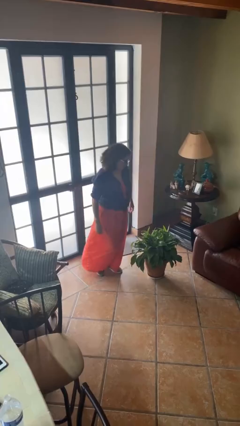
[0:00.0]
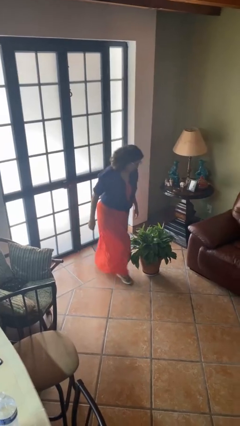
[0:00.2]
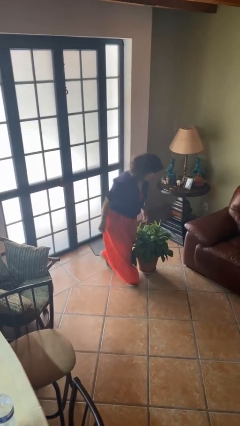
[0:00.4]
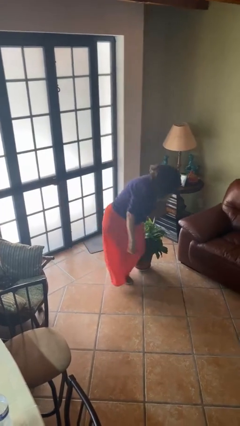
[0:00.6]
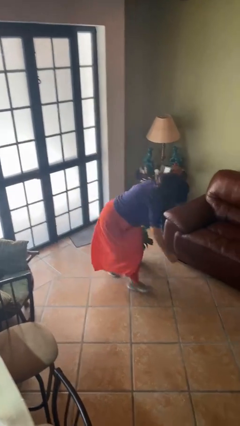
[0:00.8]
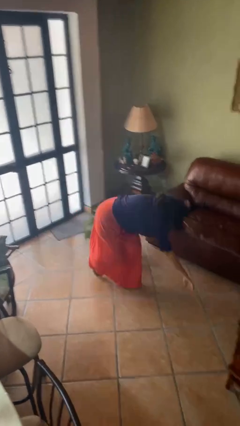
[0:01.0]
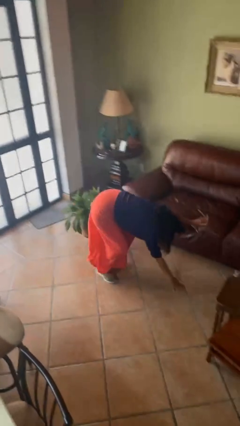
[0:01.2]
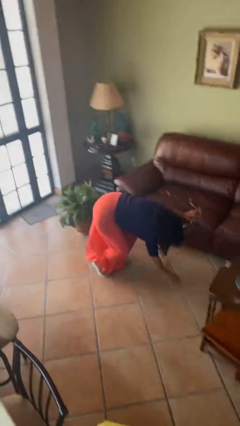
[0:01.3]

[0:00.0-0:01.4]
person trips on object on floor

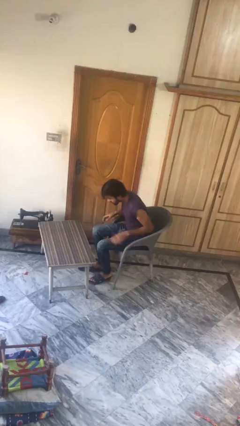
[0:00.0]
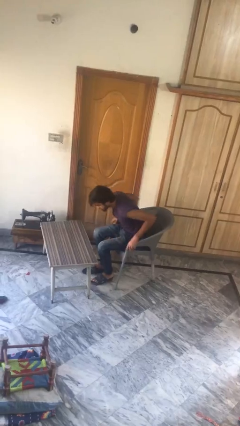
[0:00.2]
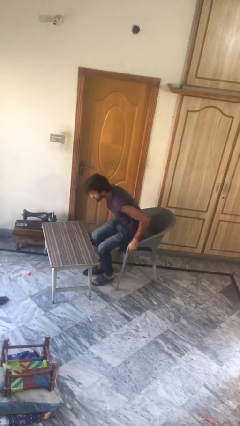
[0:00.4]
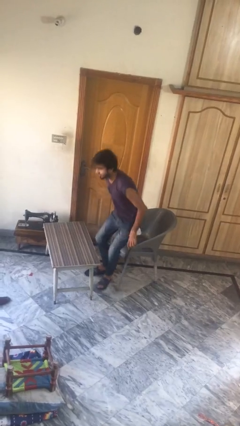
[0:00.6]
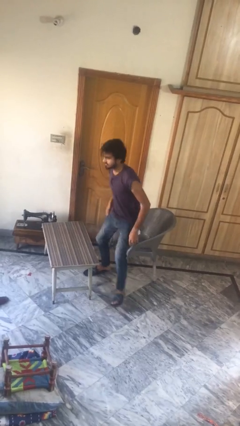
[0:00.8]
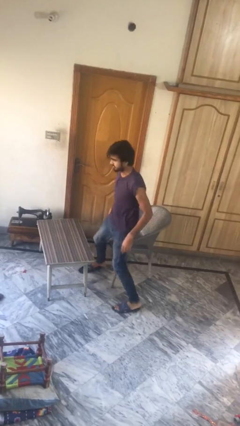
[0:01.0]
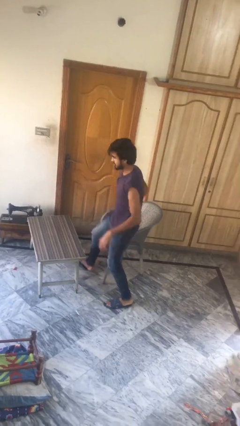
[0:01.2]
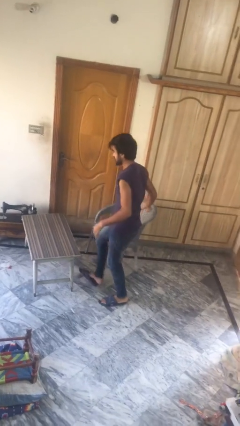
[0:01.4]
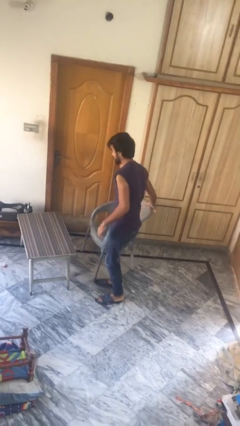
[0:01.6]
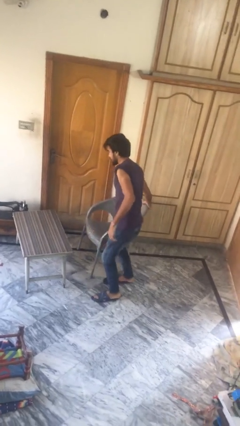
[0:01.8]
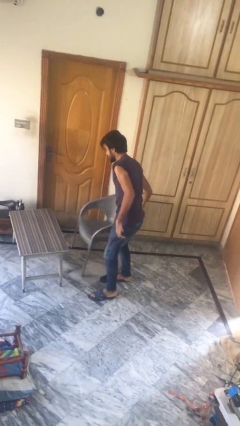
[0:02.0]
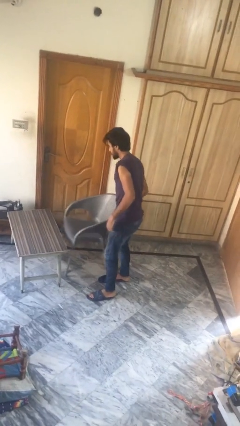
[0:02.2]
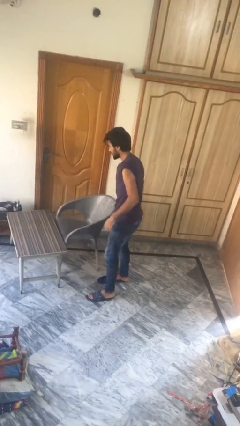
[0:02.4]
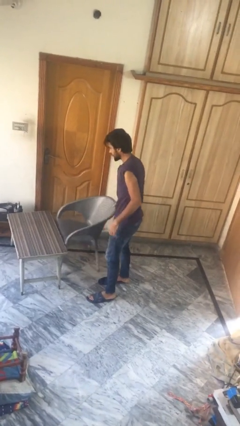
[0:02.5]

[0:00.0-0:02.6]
person stands up

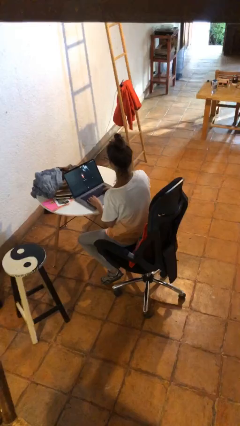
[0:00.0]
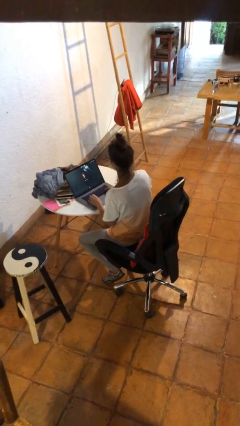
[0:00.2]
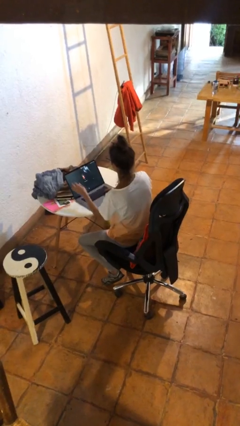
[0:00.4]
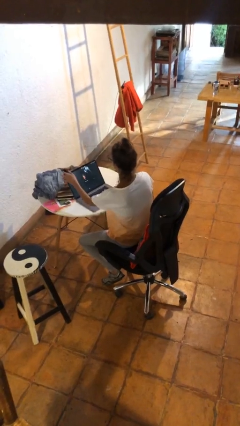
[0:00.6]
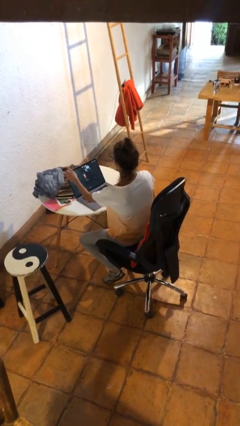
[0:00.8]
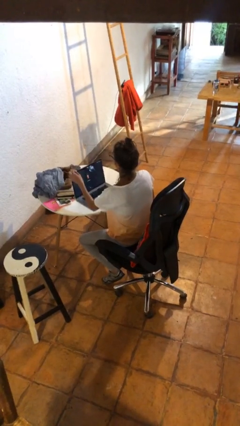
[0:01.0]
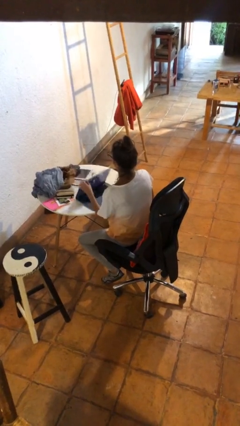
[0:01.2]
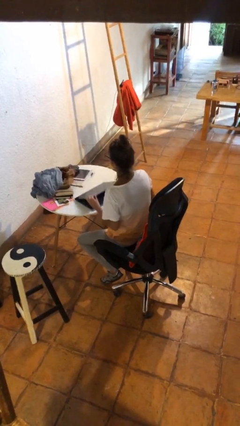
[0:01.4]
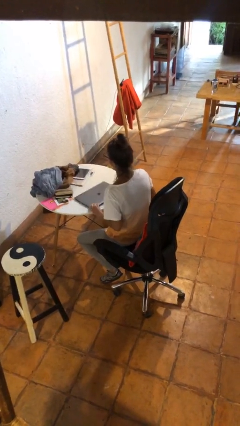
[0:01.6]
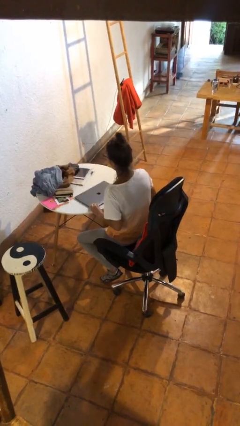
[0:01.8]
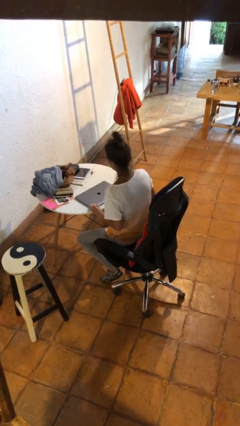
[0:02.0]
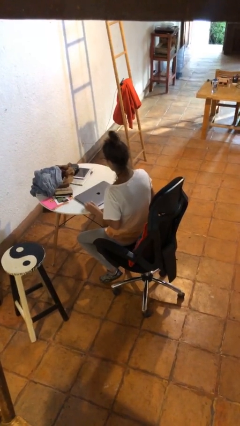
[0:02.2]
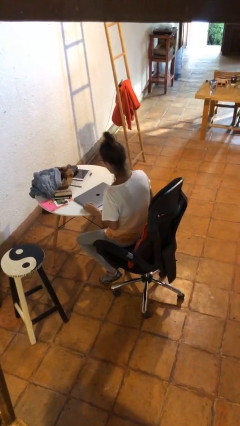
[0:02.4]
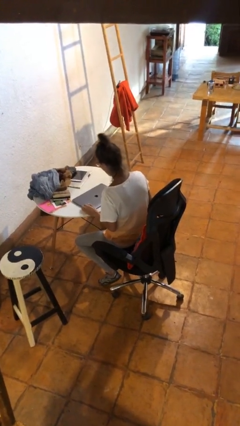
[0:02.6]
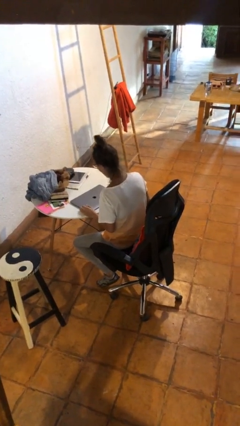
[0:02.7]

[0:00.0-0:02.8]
person closes laptop

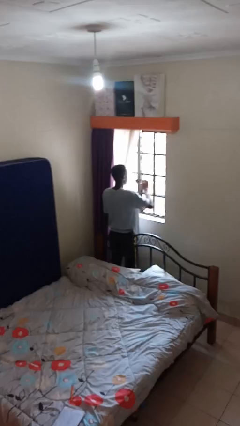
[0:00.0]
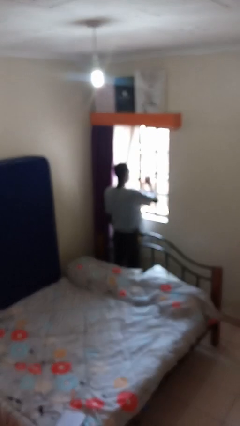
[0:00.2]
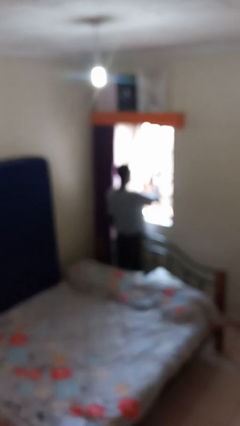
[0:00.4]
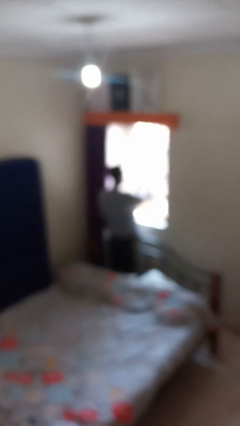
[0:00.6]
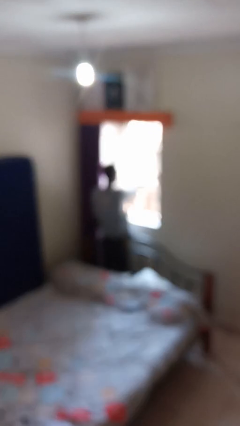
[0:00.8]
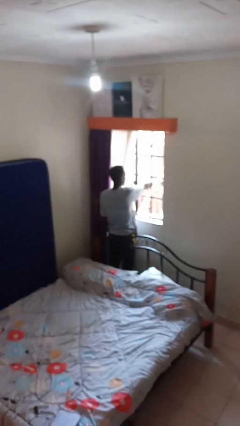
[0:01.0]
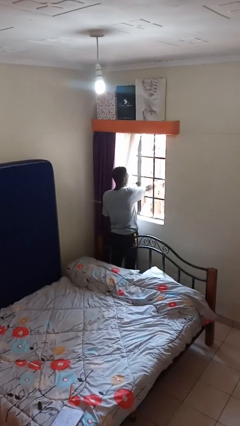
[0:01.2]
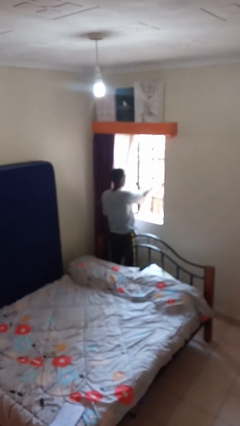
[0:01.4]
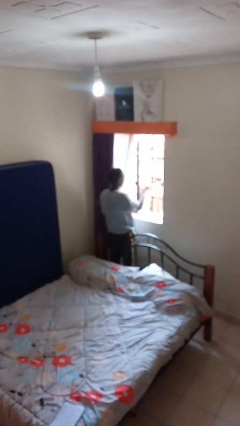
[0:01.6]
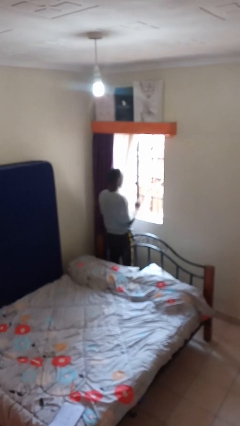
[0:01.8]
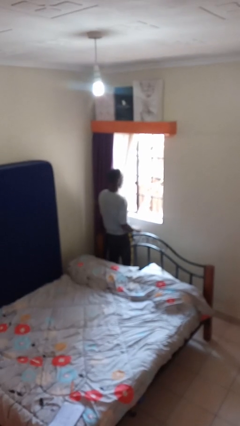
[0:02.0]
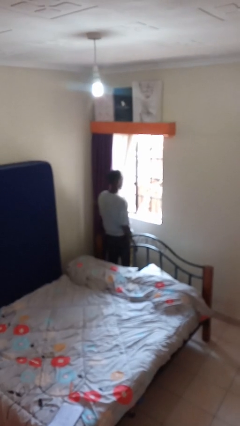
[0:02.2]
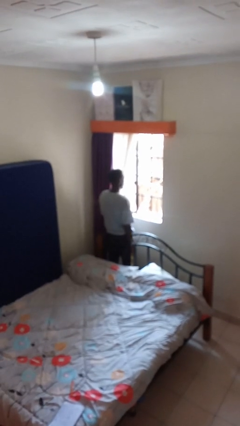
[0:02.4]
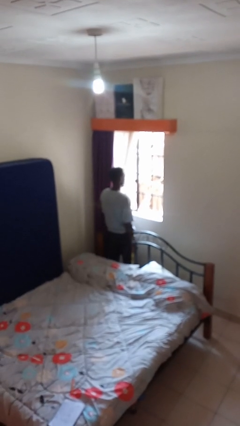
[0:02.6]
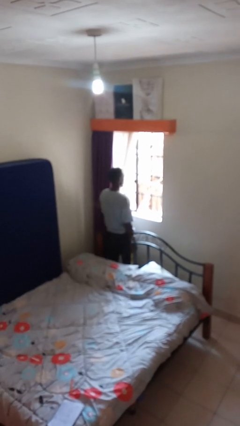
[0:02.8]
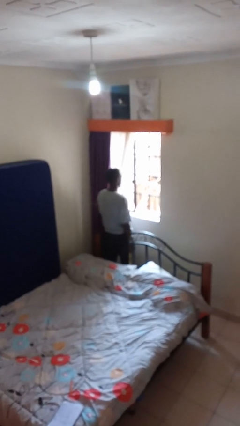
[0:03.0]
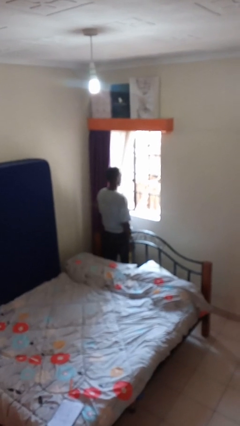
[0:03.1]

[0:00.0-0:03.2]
person opens home window

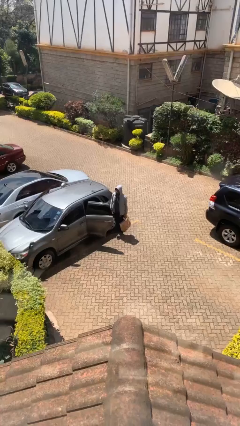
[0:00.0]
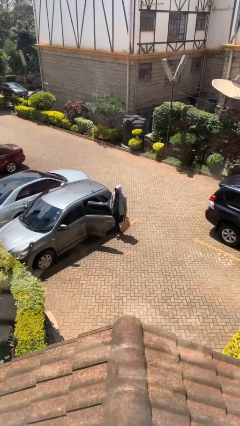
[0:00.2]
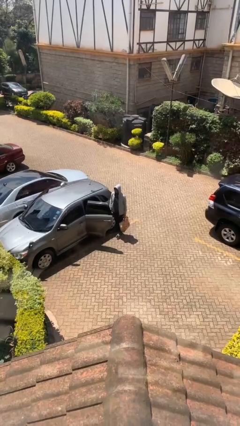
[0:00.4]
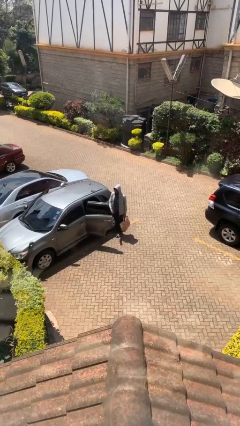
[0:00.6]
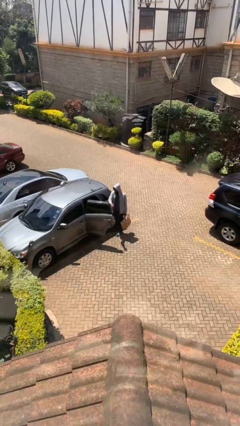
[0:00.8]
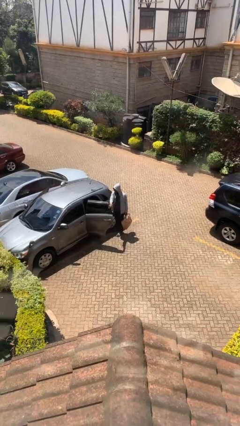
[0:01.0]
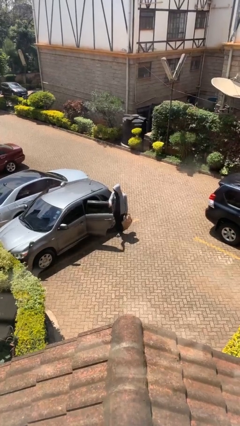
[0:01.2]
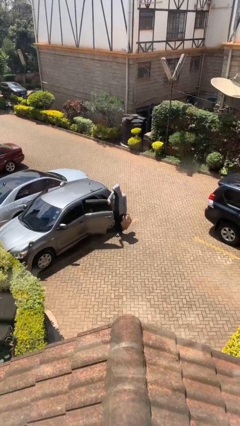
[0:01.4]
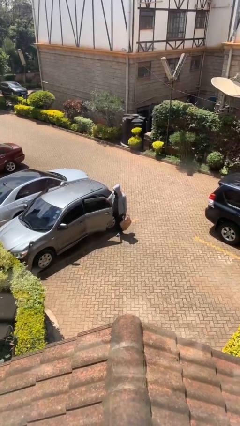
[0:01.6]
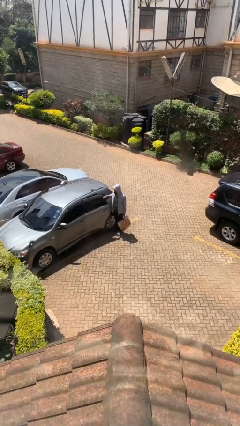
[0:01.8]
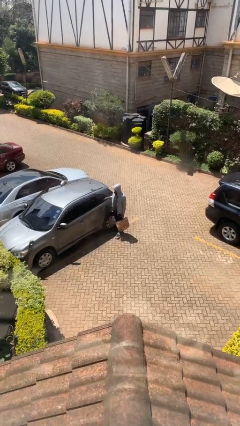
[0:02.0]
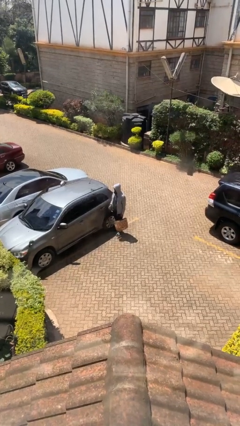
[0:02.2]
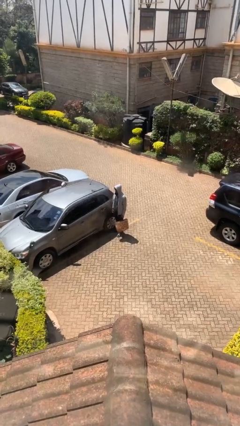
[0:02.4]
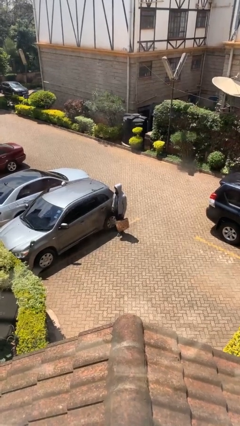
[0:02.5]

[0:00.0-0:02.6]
person closes car door

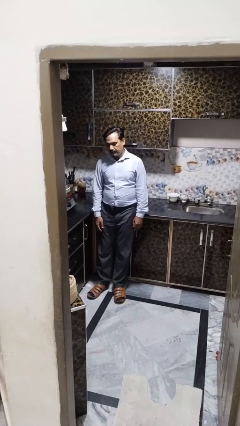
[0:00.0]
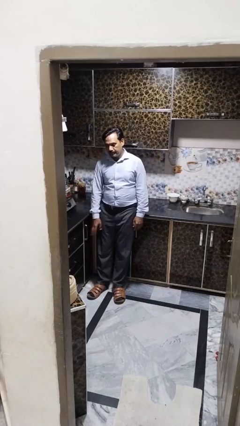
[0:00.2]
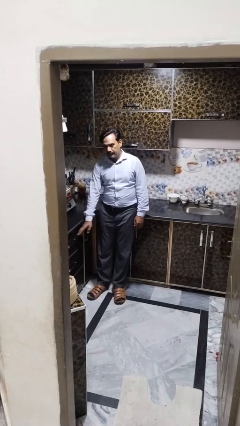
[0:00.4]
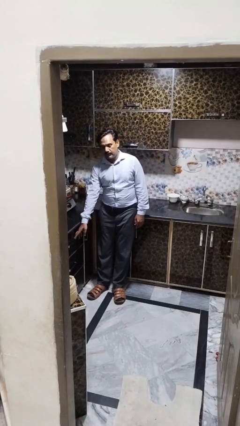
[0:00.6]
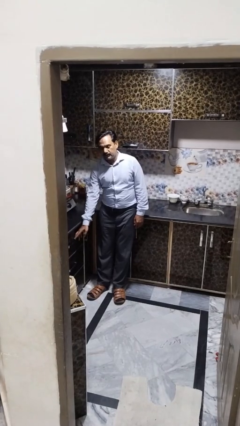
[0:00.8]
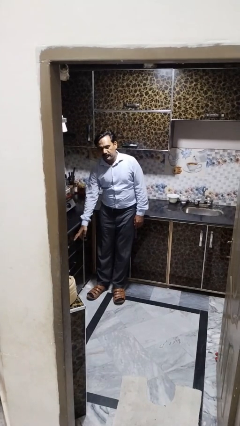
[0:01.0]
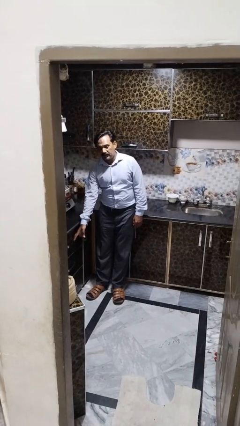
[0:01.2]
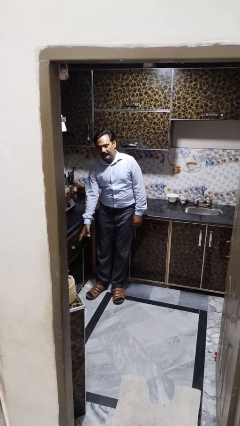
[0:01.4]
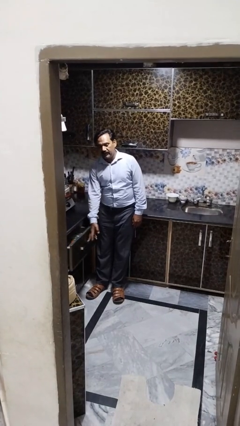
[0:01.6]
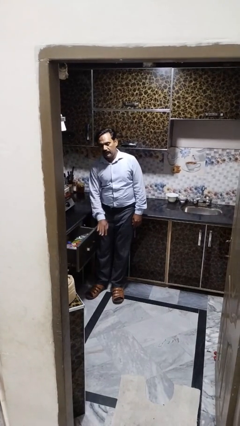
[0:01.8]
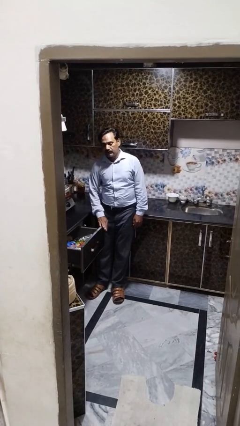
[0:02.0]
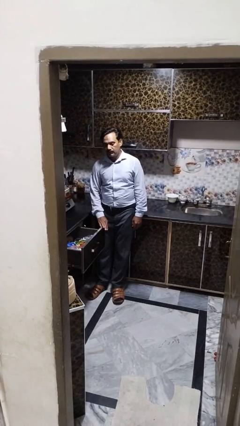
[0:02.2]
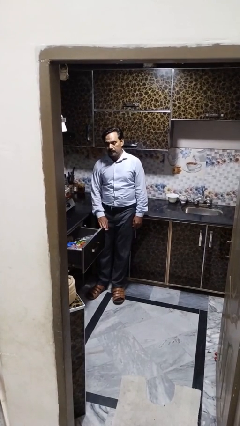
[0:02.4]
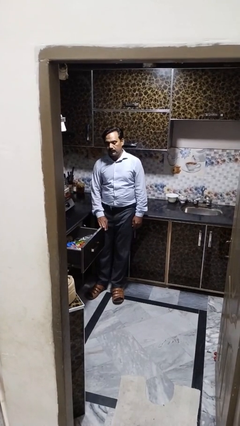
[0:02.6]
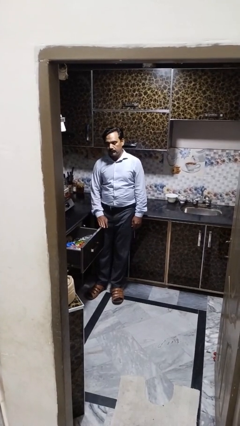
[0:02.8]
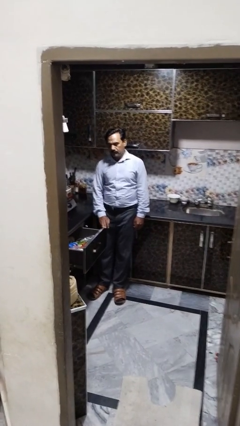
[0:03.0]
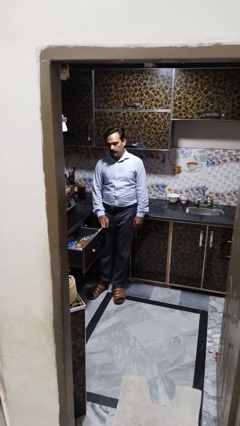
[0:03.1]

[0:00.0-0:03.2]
person opens kitchen drawer

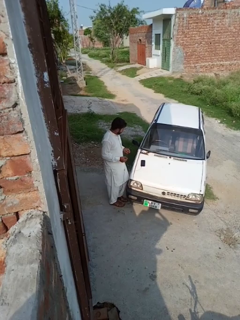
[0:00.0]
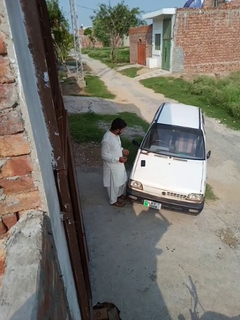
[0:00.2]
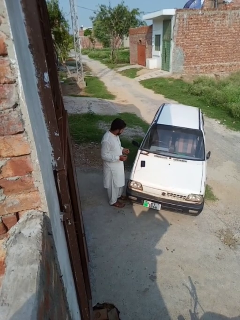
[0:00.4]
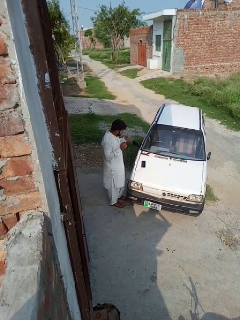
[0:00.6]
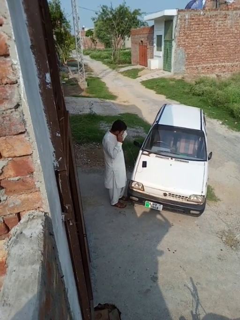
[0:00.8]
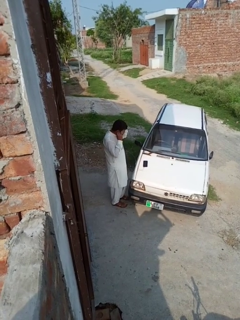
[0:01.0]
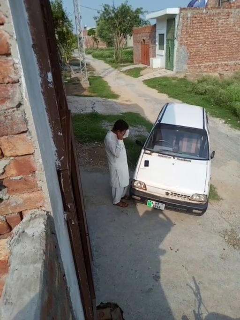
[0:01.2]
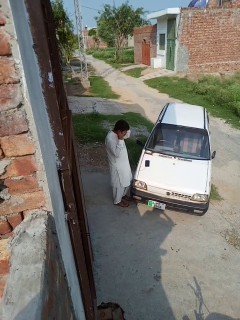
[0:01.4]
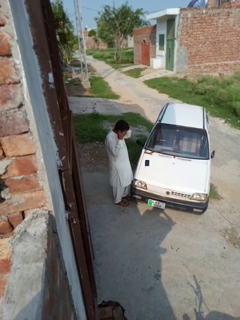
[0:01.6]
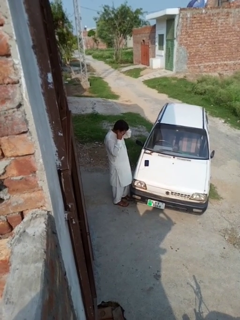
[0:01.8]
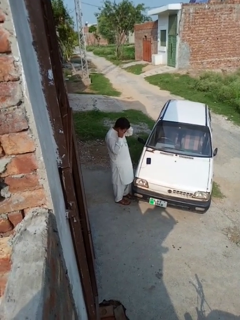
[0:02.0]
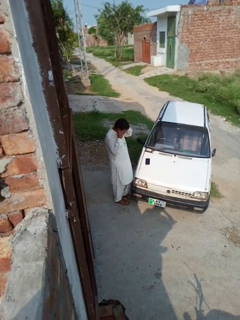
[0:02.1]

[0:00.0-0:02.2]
person puts on headphones
